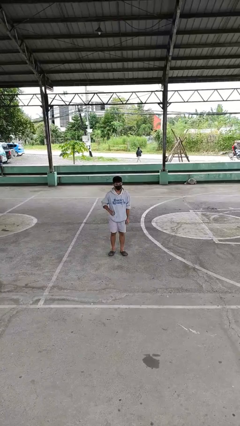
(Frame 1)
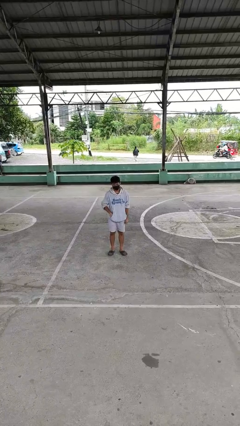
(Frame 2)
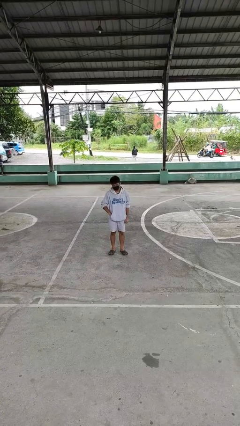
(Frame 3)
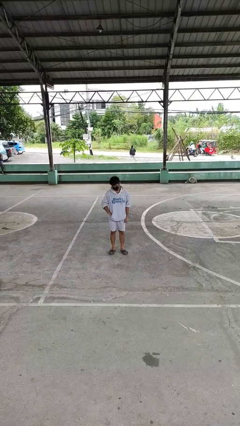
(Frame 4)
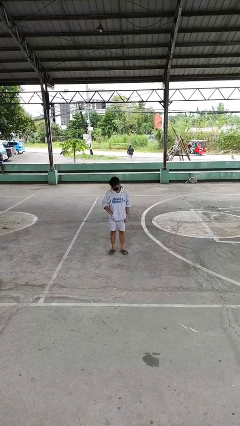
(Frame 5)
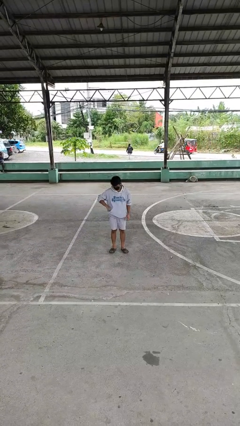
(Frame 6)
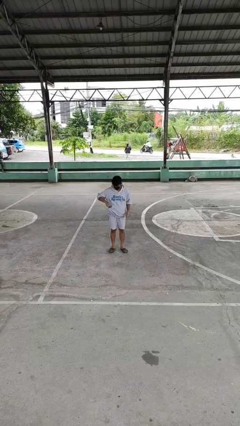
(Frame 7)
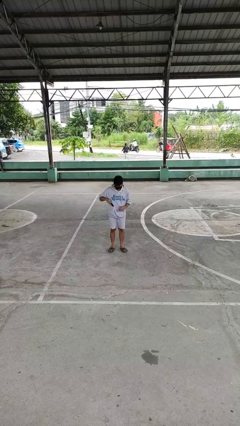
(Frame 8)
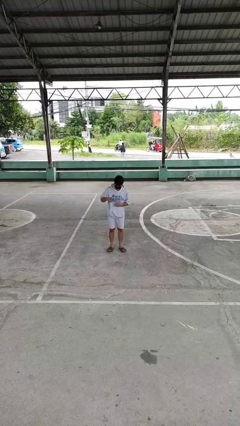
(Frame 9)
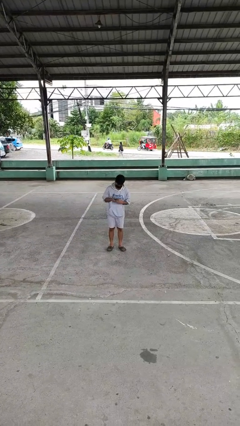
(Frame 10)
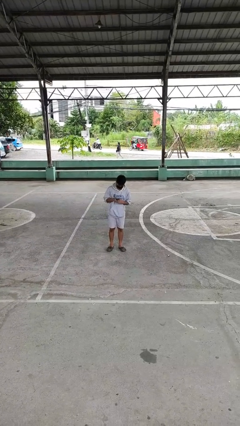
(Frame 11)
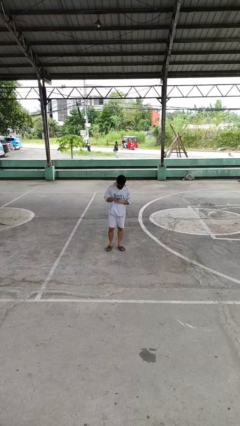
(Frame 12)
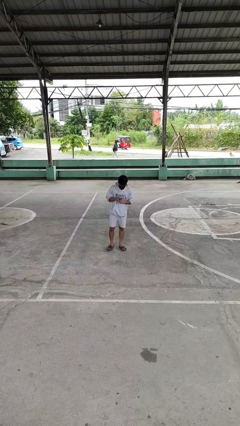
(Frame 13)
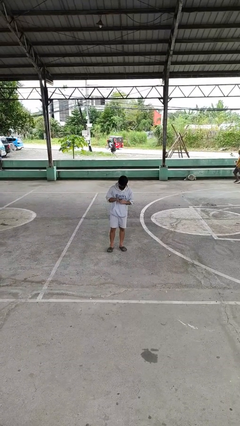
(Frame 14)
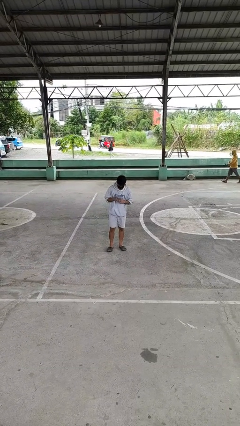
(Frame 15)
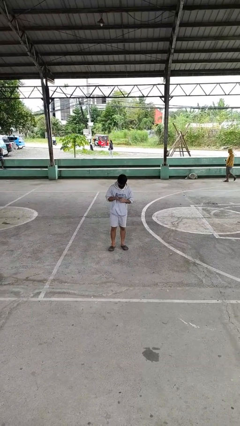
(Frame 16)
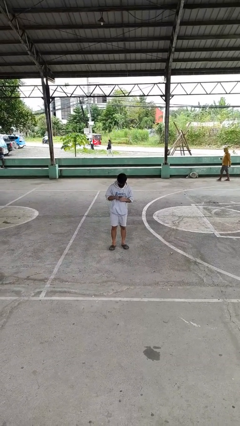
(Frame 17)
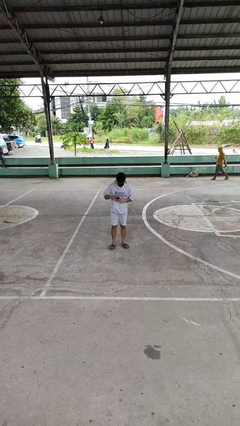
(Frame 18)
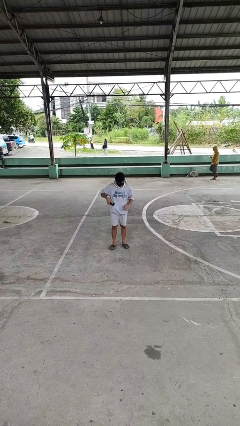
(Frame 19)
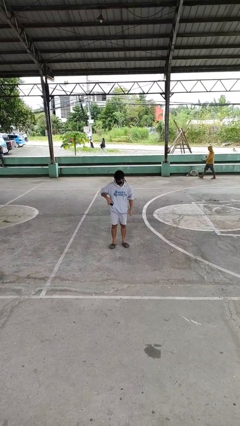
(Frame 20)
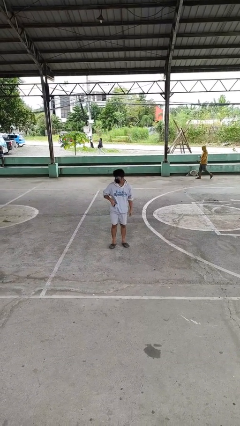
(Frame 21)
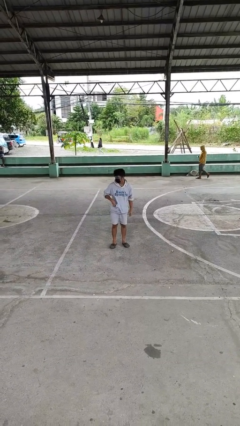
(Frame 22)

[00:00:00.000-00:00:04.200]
person takes phone from pocket

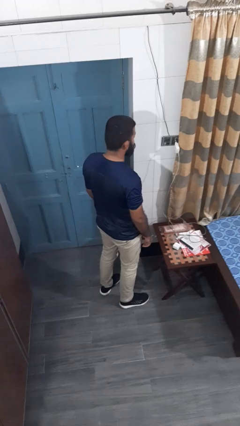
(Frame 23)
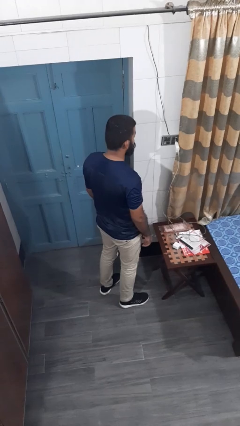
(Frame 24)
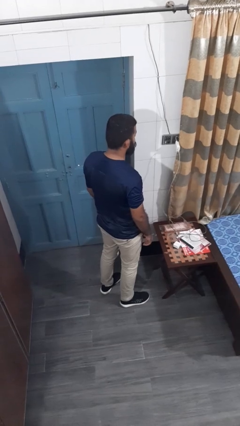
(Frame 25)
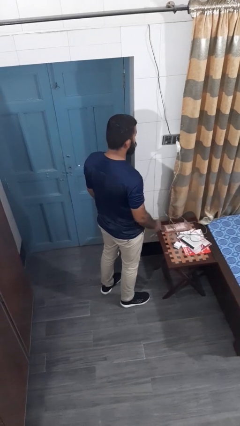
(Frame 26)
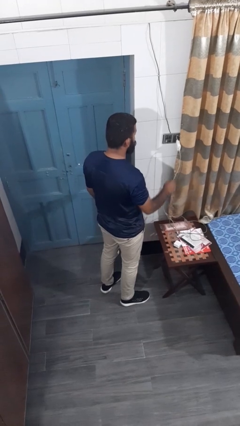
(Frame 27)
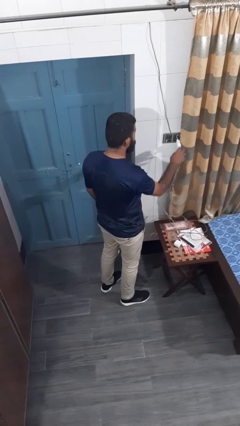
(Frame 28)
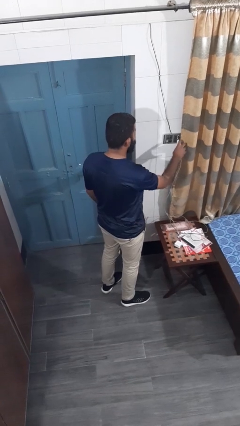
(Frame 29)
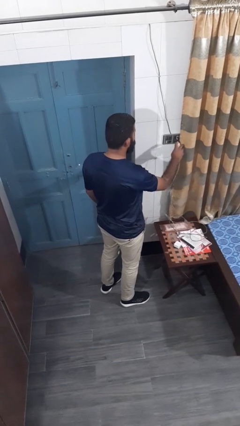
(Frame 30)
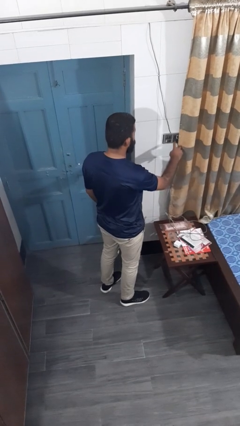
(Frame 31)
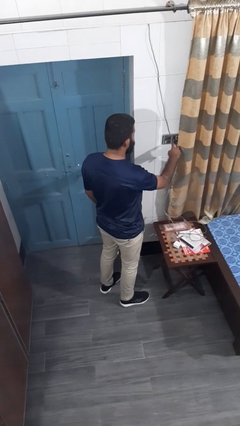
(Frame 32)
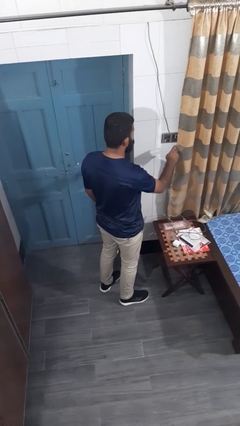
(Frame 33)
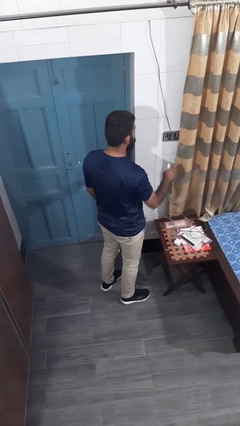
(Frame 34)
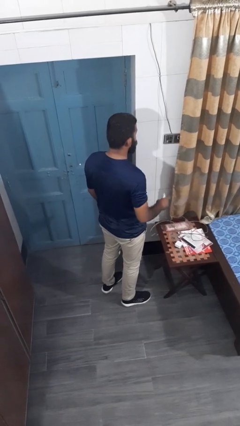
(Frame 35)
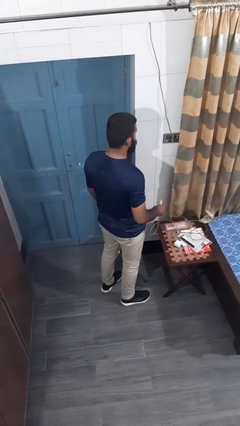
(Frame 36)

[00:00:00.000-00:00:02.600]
person unplugs from electrical socket

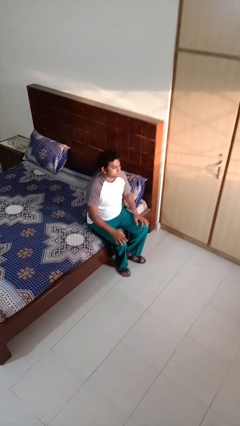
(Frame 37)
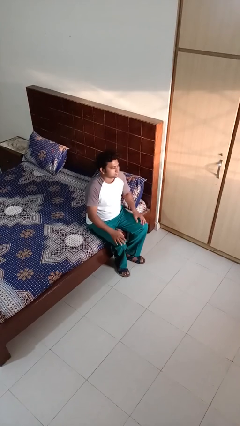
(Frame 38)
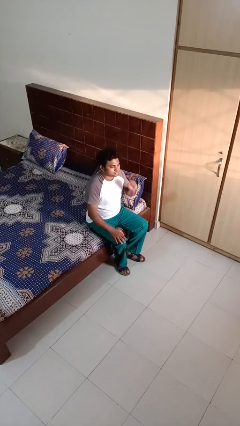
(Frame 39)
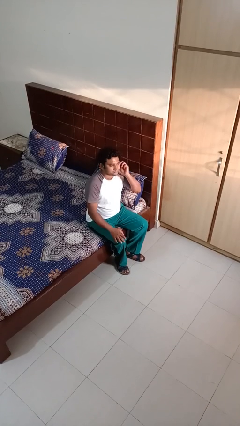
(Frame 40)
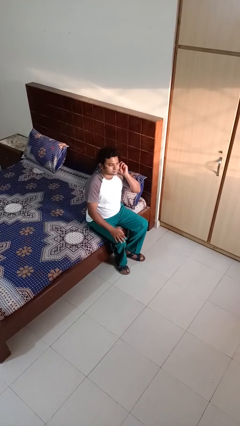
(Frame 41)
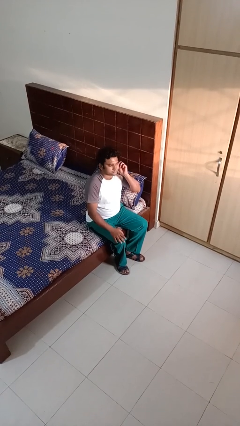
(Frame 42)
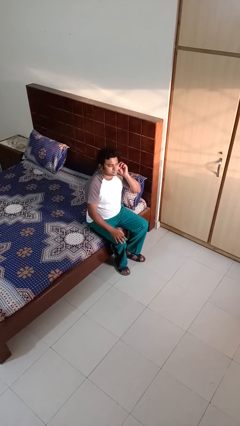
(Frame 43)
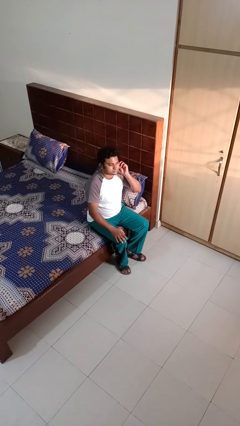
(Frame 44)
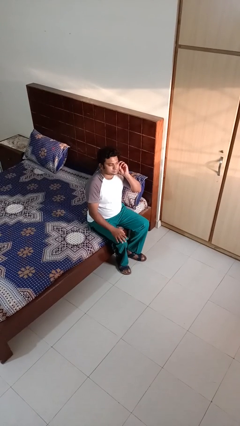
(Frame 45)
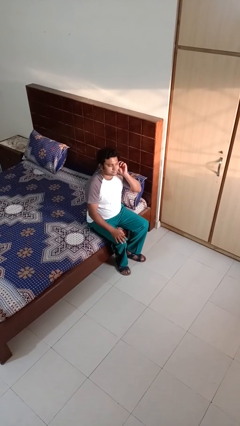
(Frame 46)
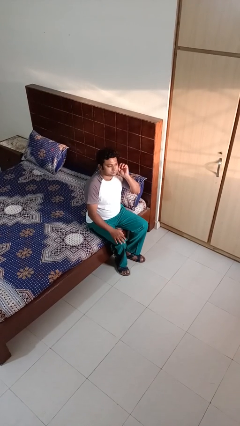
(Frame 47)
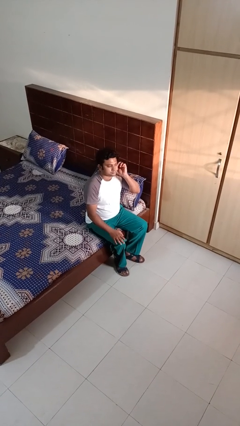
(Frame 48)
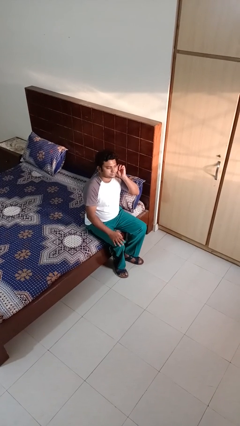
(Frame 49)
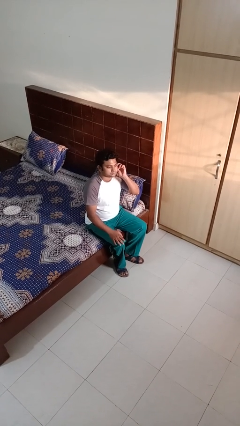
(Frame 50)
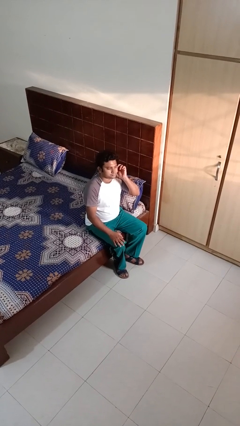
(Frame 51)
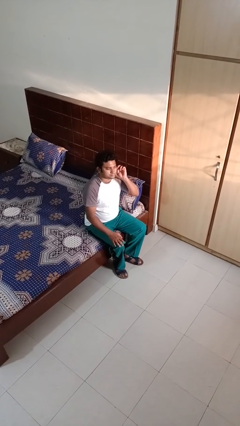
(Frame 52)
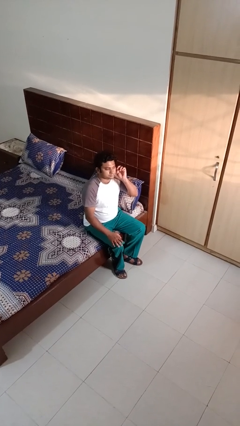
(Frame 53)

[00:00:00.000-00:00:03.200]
person touches earlobe

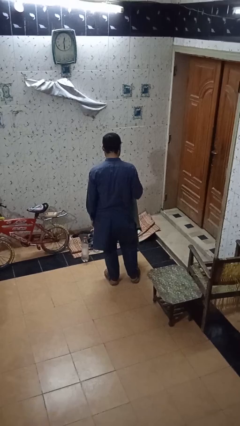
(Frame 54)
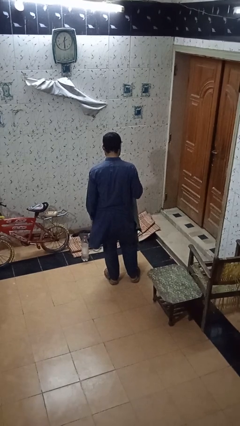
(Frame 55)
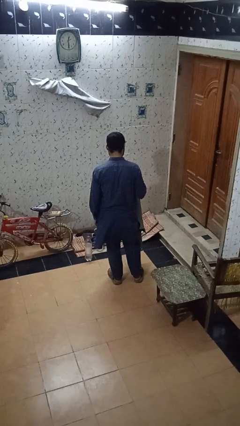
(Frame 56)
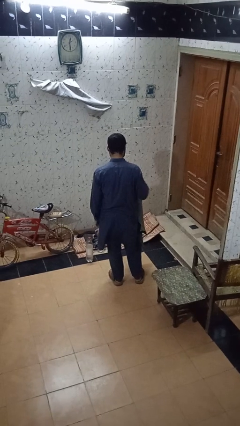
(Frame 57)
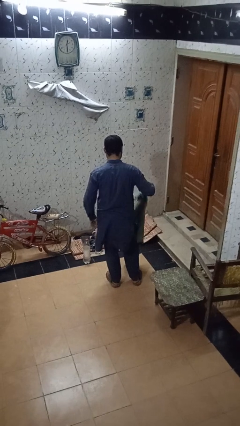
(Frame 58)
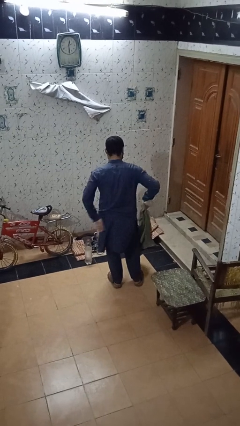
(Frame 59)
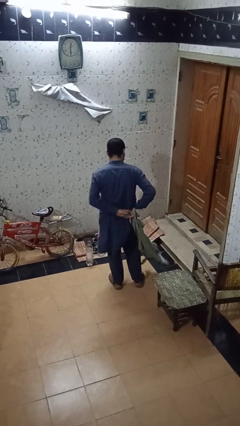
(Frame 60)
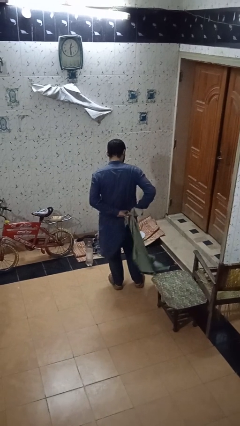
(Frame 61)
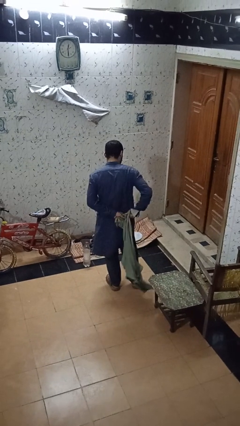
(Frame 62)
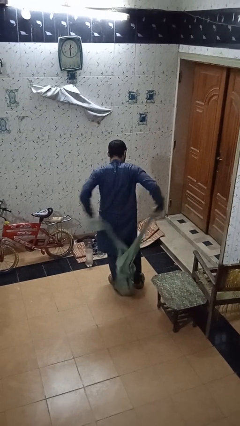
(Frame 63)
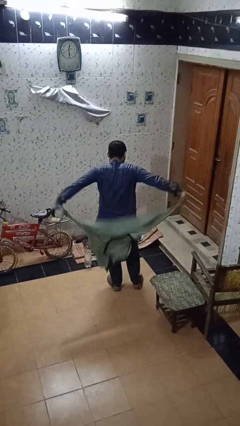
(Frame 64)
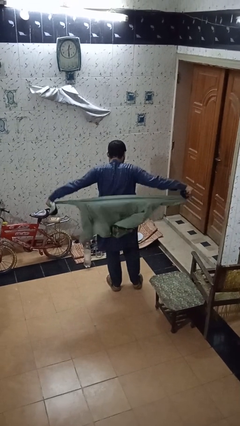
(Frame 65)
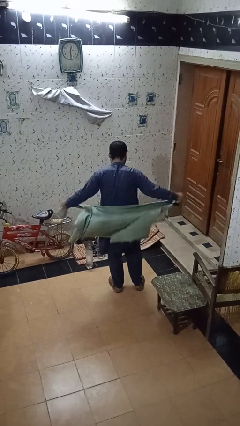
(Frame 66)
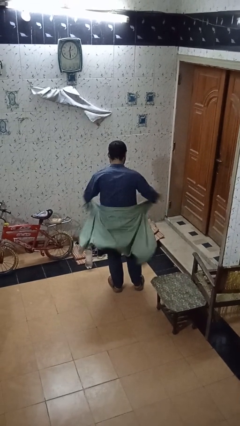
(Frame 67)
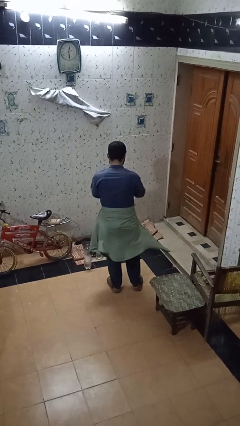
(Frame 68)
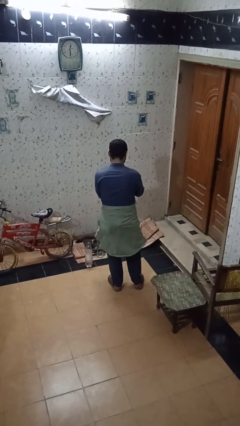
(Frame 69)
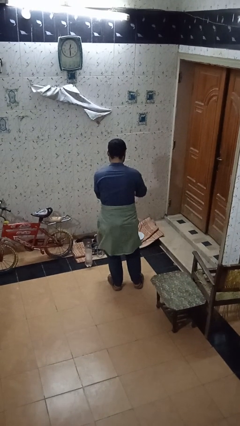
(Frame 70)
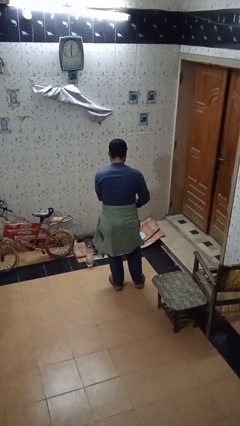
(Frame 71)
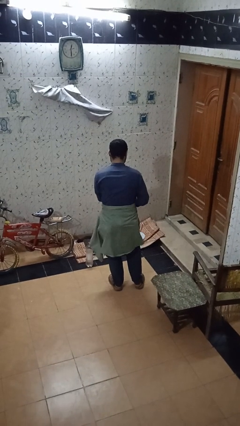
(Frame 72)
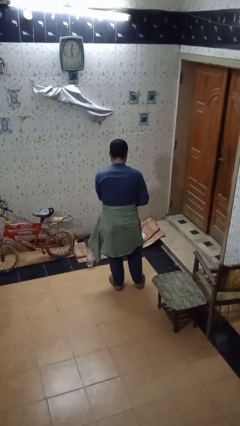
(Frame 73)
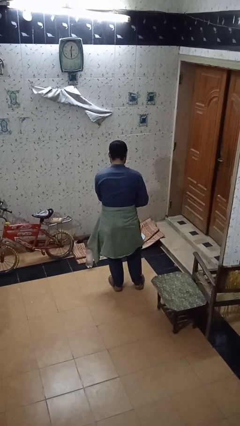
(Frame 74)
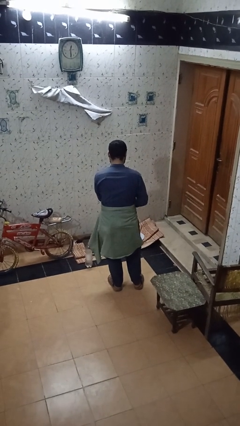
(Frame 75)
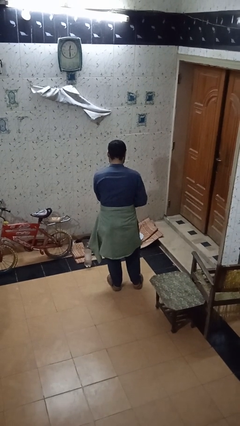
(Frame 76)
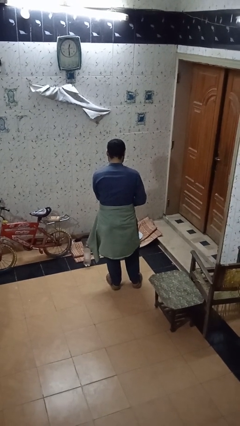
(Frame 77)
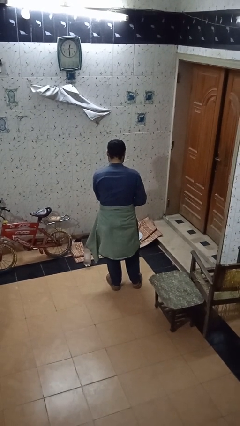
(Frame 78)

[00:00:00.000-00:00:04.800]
person ties jacket around waist

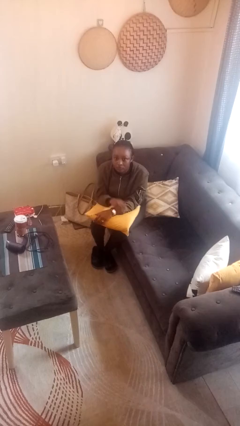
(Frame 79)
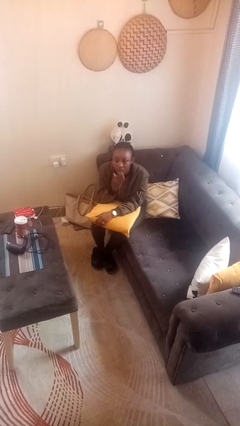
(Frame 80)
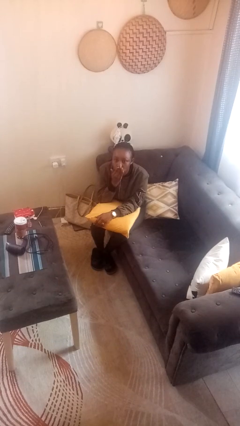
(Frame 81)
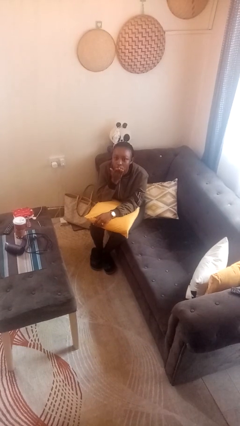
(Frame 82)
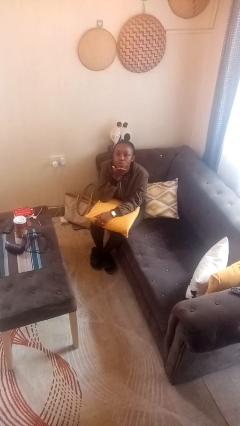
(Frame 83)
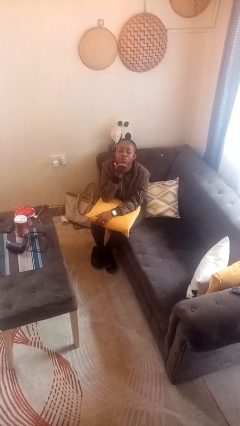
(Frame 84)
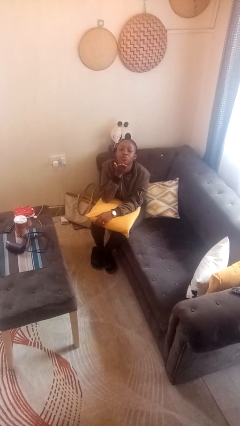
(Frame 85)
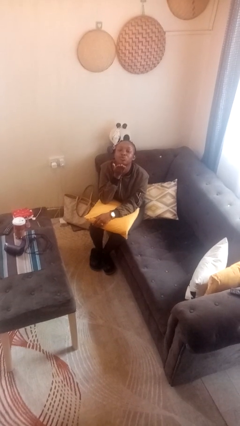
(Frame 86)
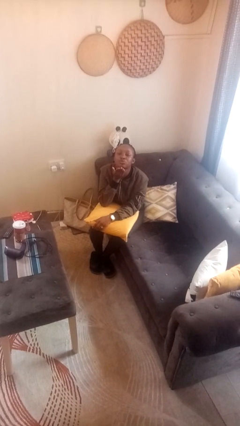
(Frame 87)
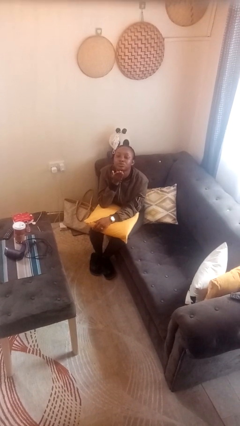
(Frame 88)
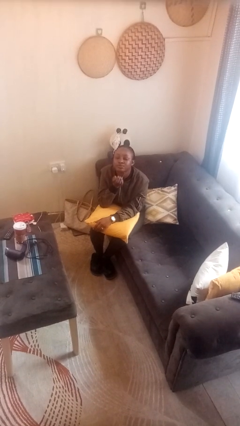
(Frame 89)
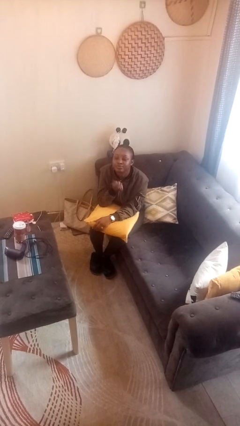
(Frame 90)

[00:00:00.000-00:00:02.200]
person gestures blow kiss

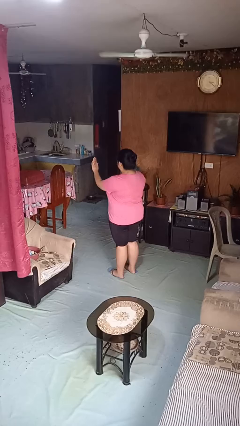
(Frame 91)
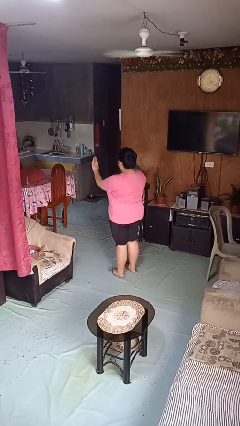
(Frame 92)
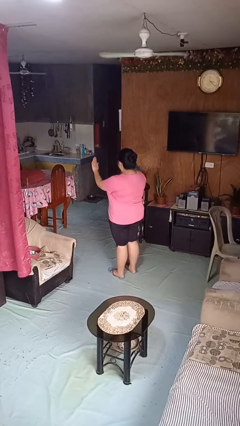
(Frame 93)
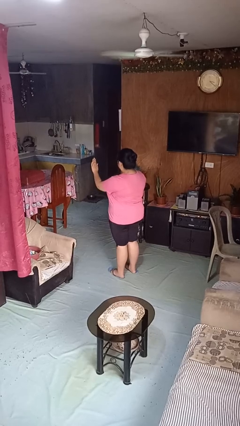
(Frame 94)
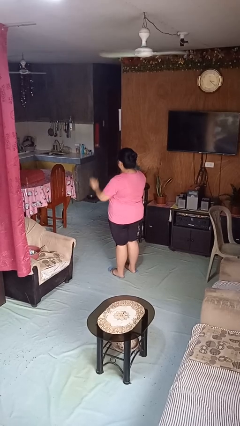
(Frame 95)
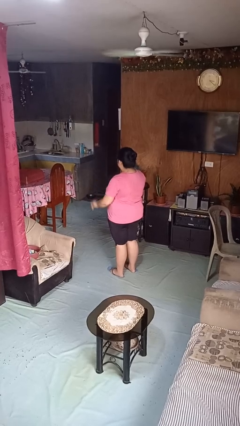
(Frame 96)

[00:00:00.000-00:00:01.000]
person gestures stop
